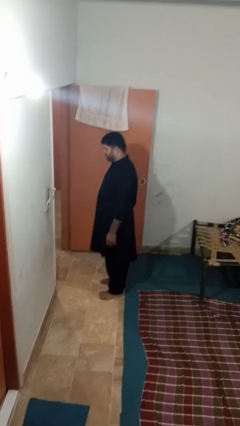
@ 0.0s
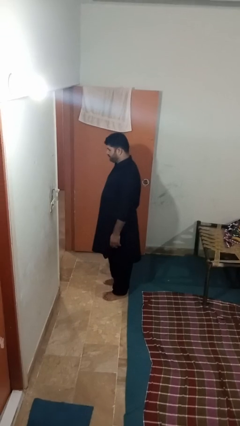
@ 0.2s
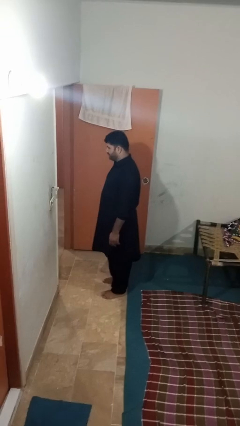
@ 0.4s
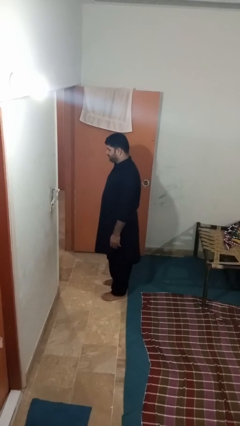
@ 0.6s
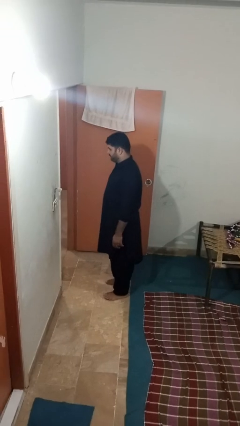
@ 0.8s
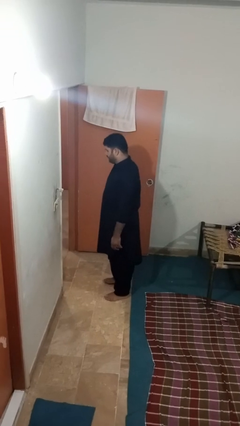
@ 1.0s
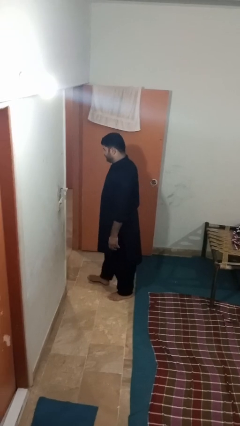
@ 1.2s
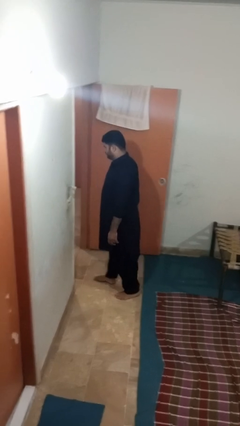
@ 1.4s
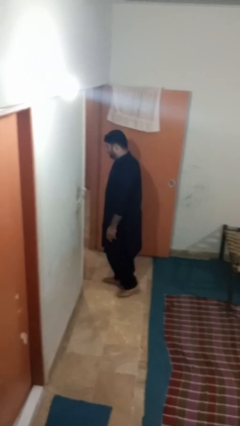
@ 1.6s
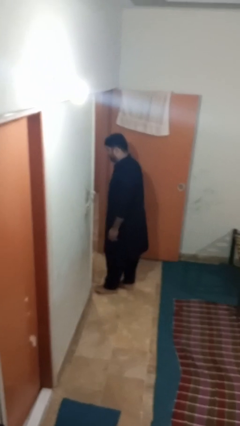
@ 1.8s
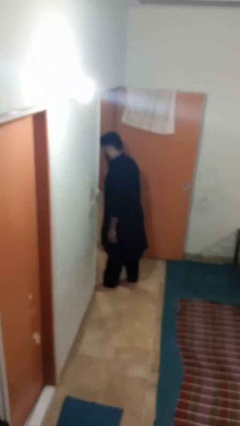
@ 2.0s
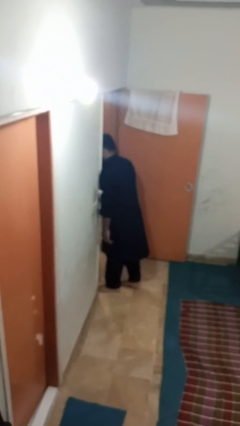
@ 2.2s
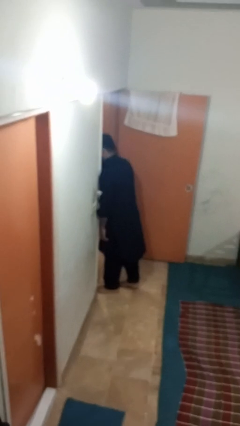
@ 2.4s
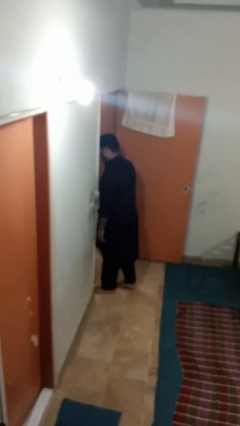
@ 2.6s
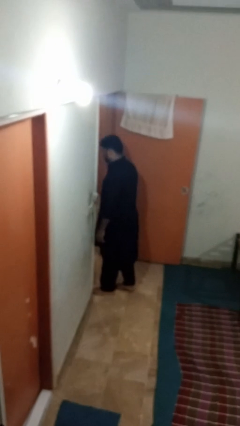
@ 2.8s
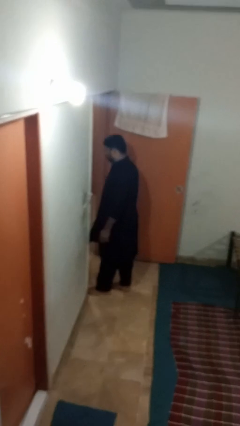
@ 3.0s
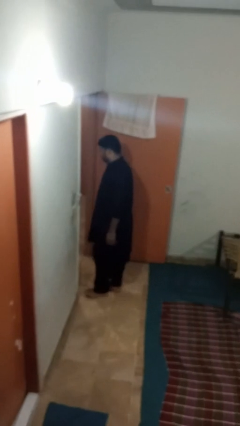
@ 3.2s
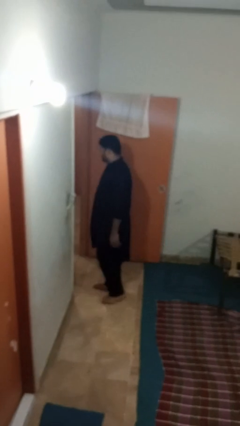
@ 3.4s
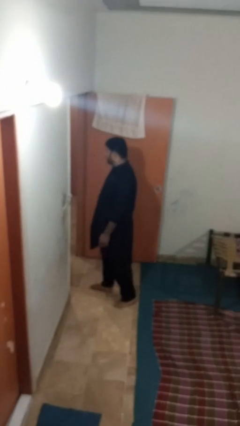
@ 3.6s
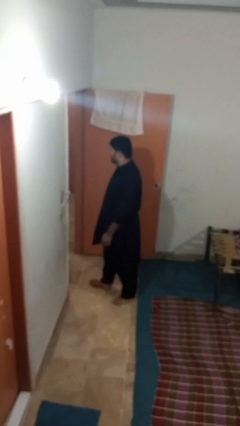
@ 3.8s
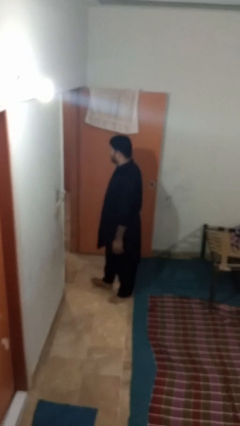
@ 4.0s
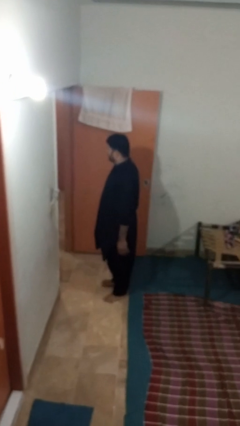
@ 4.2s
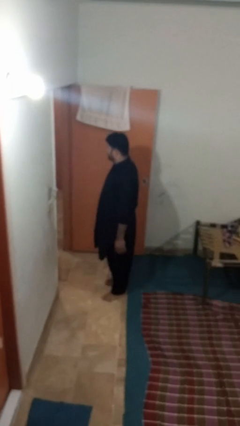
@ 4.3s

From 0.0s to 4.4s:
person bumps into wall

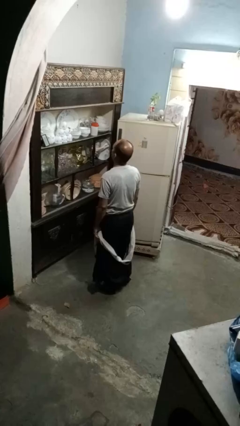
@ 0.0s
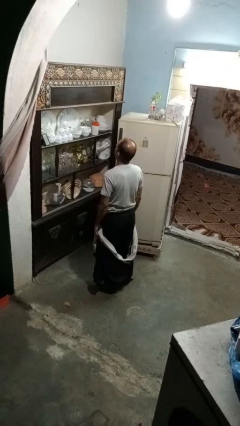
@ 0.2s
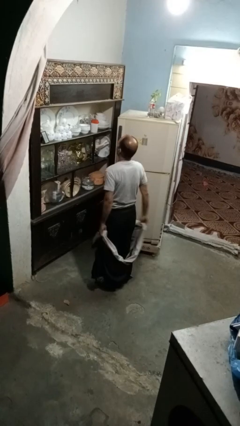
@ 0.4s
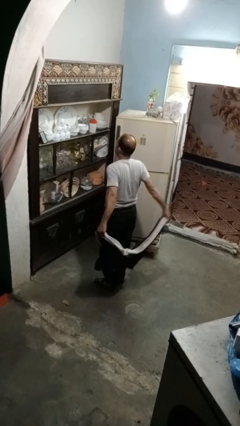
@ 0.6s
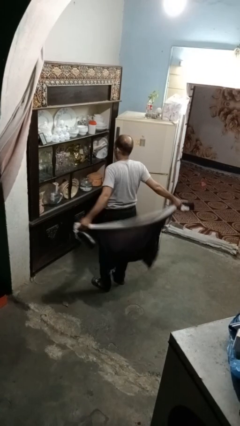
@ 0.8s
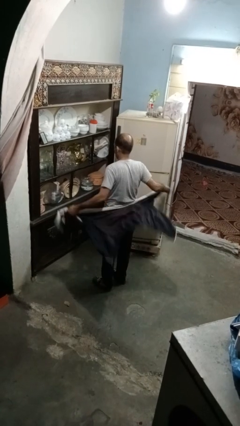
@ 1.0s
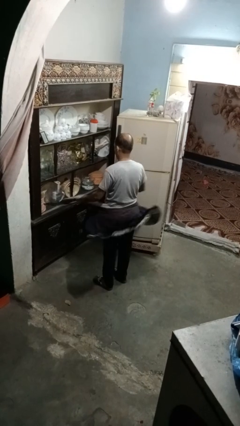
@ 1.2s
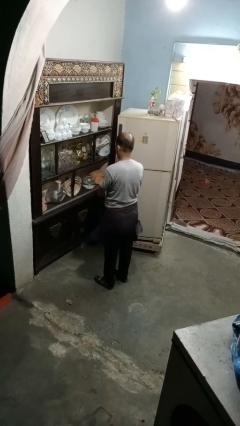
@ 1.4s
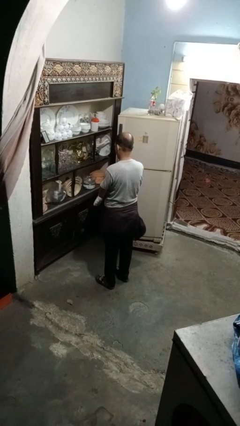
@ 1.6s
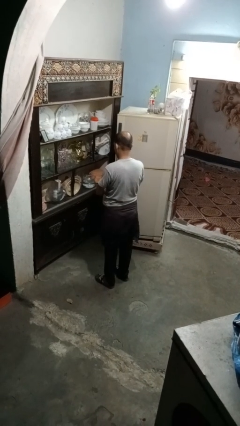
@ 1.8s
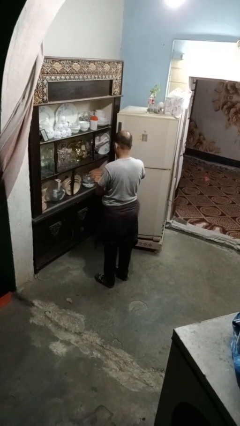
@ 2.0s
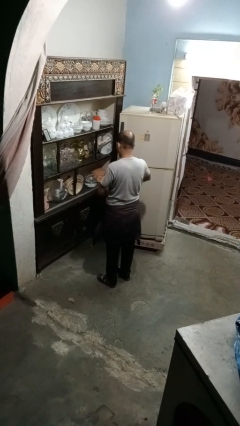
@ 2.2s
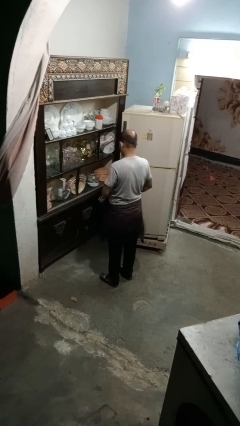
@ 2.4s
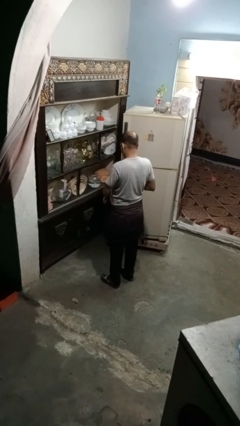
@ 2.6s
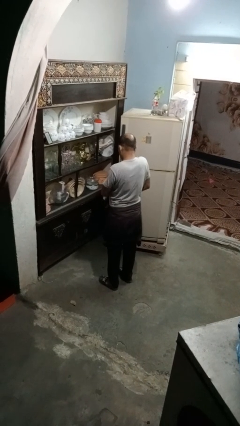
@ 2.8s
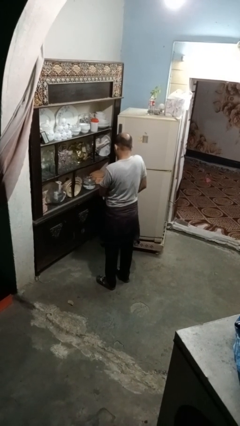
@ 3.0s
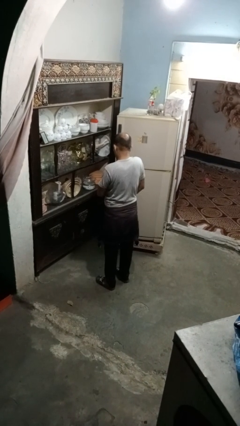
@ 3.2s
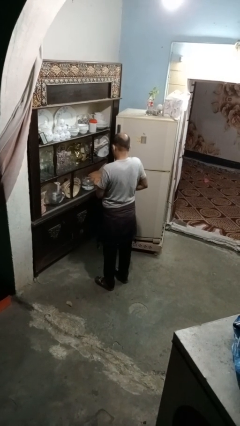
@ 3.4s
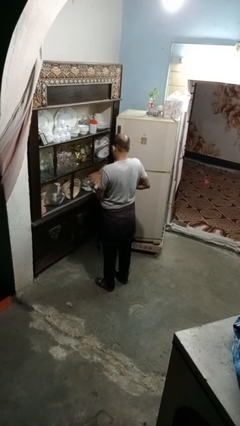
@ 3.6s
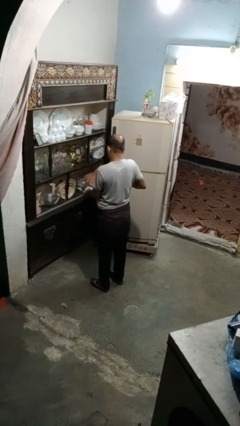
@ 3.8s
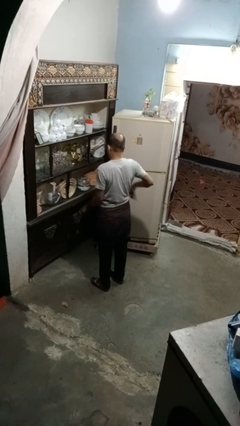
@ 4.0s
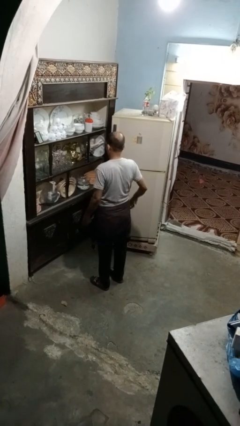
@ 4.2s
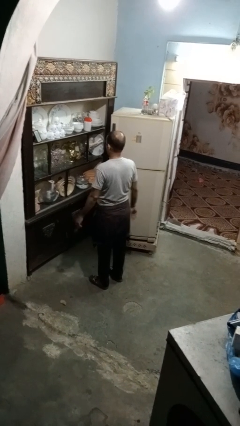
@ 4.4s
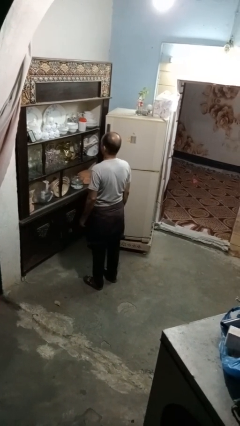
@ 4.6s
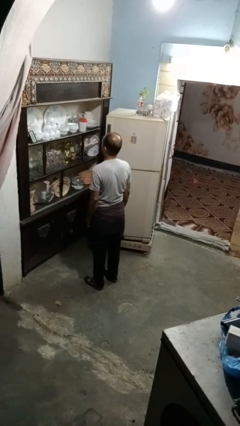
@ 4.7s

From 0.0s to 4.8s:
person ties jacket around waist

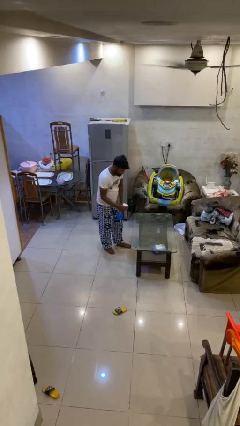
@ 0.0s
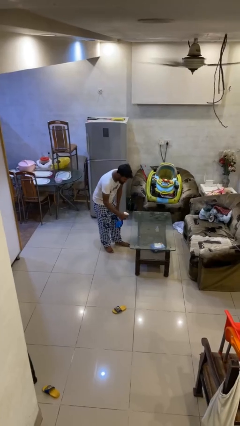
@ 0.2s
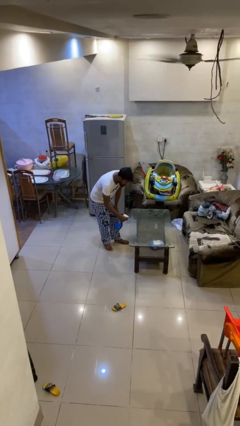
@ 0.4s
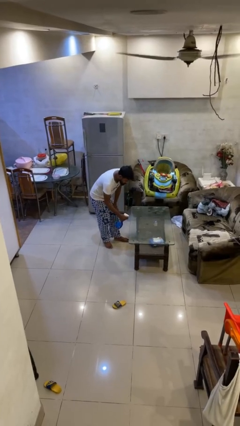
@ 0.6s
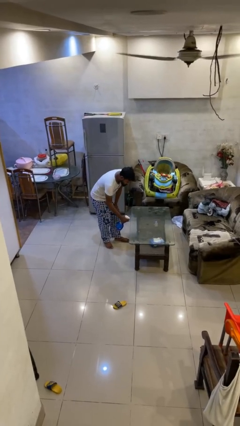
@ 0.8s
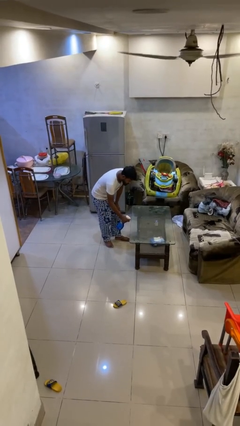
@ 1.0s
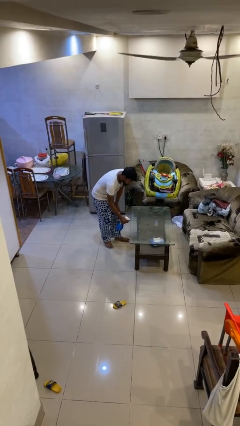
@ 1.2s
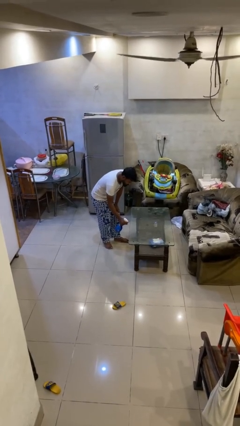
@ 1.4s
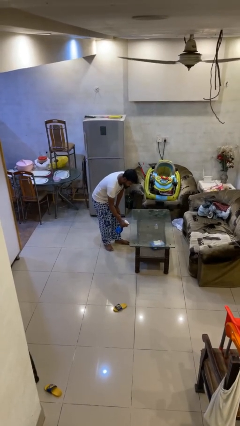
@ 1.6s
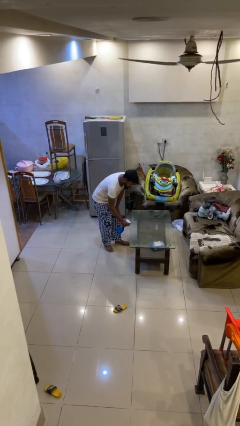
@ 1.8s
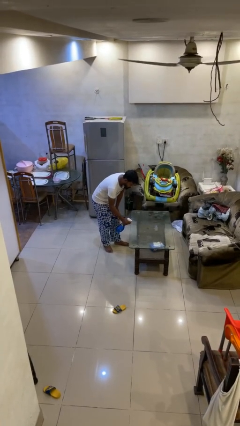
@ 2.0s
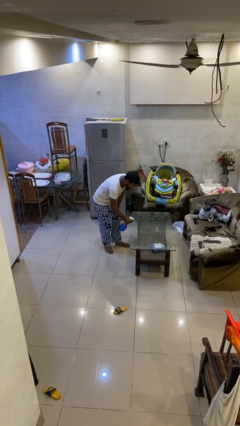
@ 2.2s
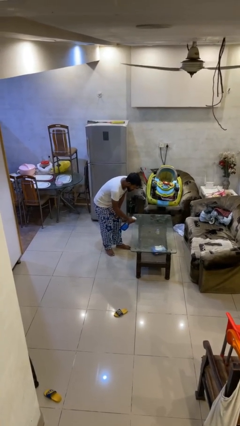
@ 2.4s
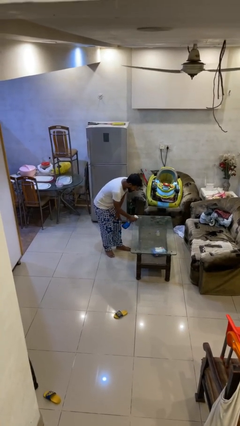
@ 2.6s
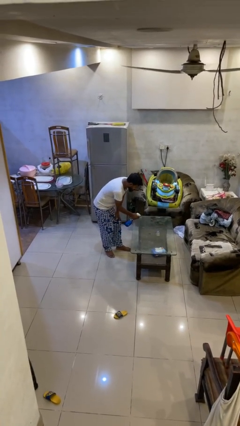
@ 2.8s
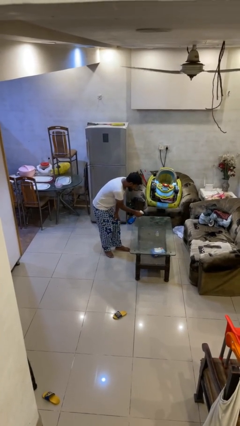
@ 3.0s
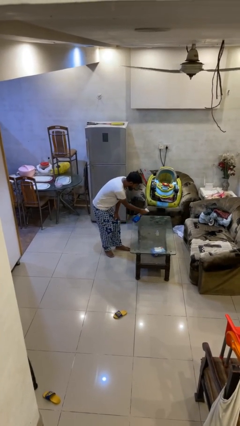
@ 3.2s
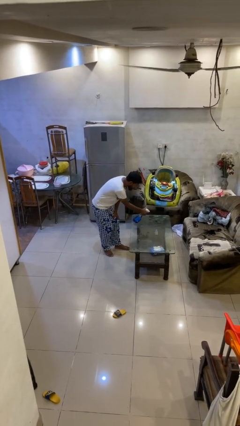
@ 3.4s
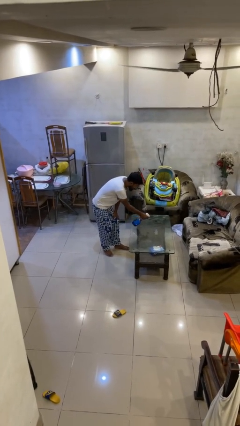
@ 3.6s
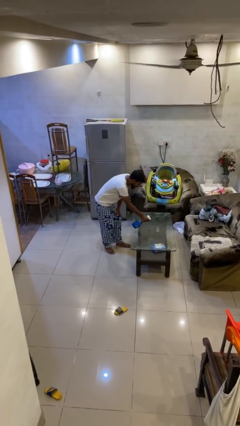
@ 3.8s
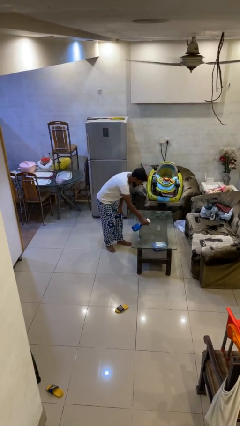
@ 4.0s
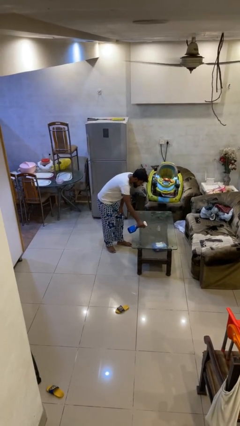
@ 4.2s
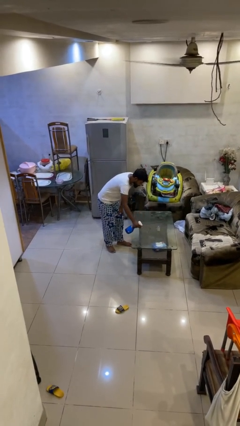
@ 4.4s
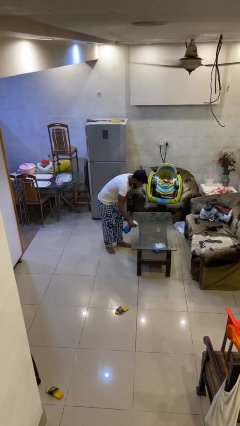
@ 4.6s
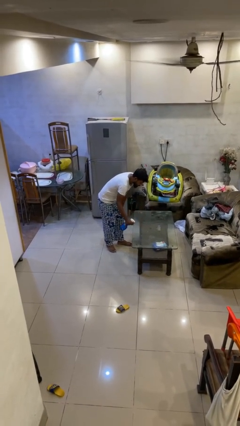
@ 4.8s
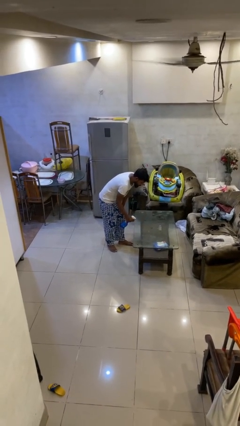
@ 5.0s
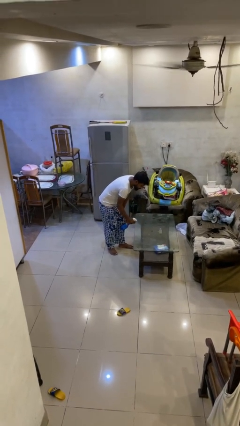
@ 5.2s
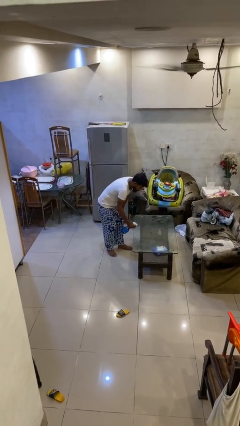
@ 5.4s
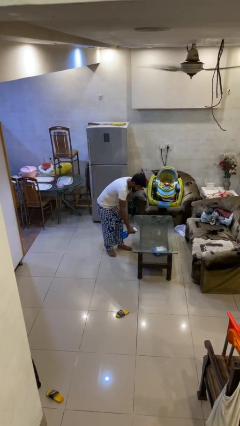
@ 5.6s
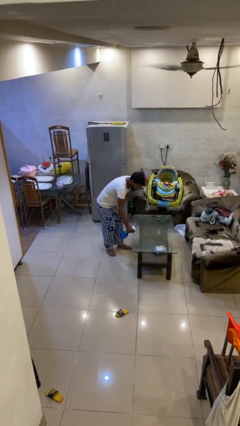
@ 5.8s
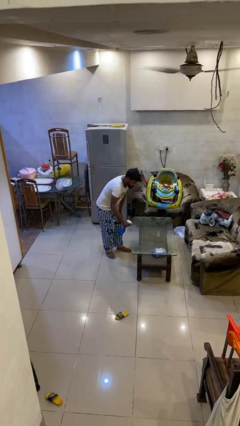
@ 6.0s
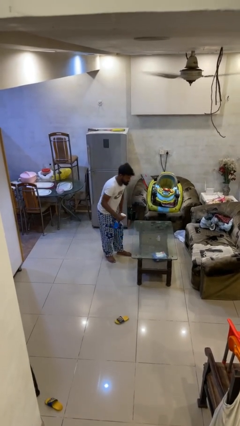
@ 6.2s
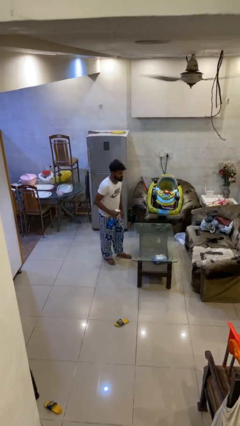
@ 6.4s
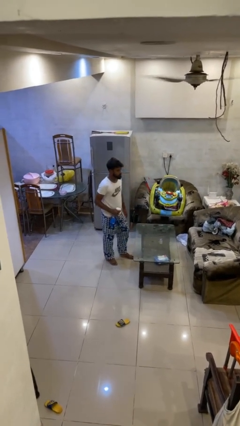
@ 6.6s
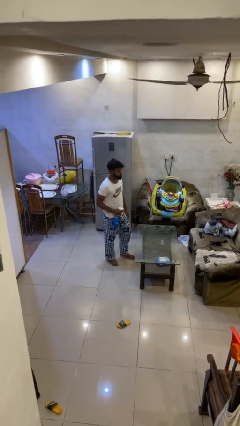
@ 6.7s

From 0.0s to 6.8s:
person sprays from bottle

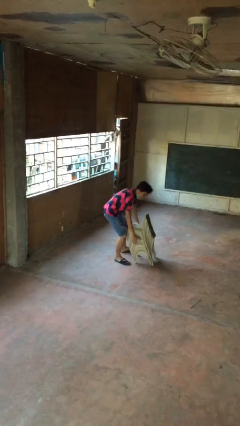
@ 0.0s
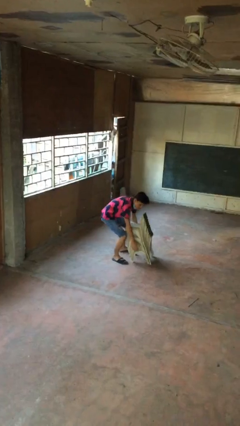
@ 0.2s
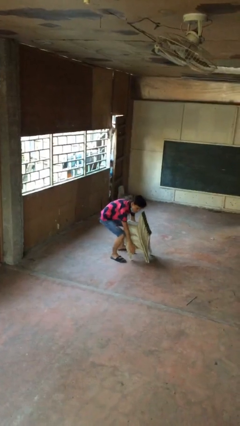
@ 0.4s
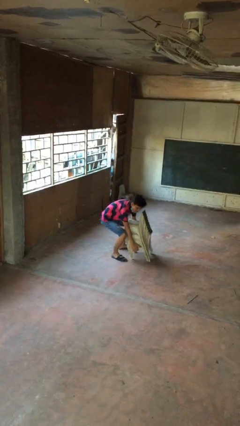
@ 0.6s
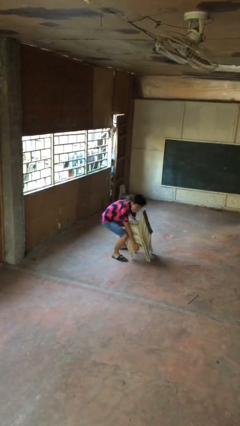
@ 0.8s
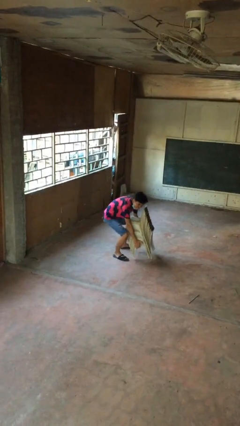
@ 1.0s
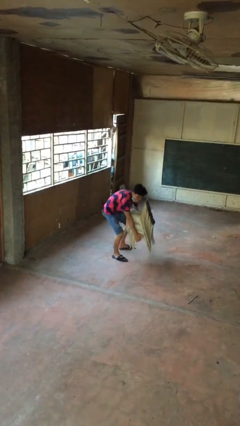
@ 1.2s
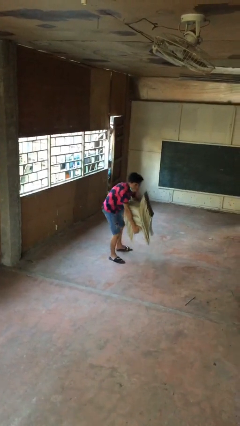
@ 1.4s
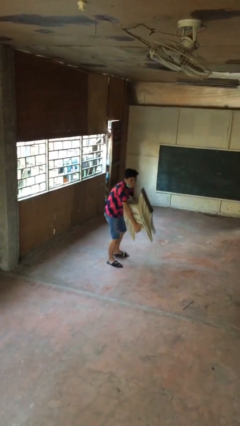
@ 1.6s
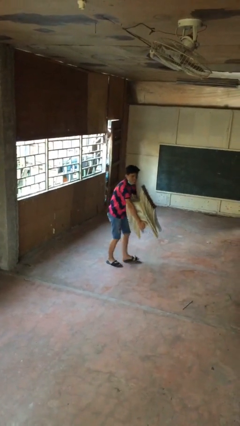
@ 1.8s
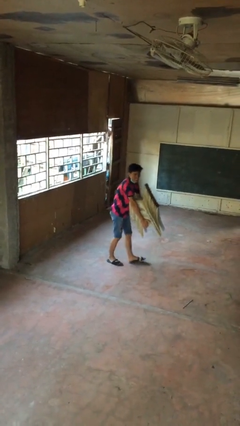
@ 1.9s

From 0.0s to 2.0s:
person picks up object from floor

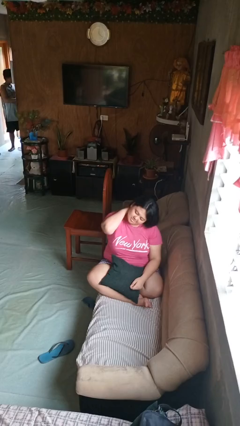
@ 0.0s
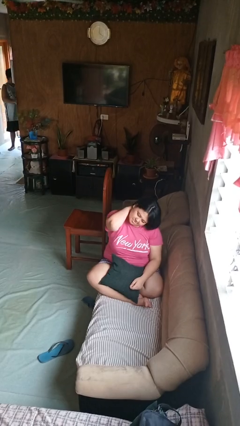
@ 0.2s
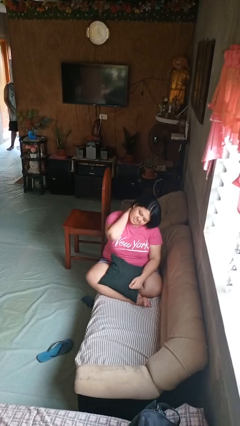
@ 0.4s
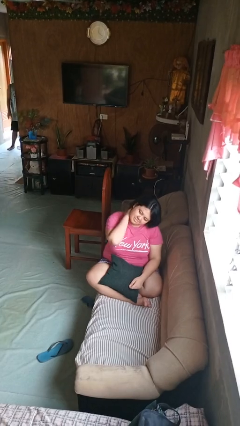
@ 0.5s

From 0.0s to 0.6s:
person rubs neck
